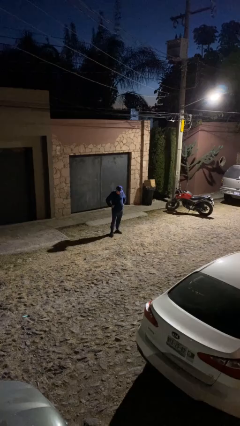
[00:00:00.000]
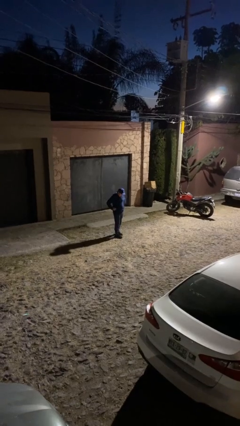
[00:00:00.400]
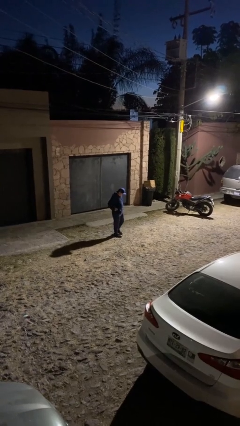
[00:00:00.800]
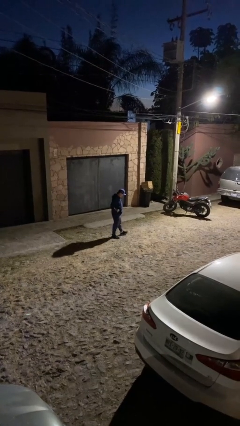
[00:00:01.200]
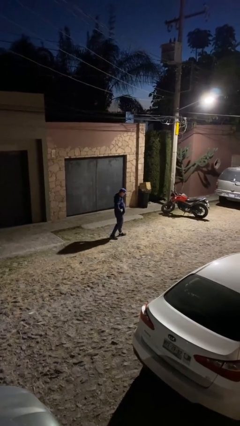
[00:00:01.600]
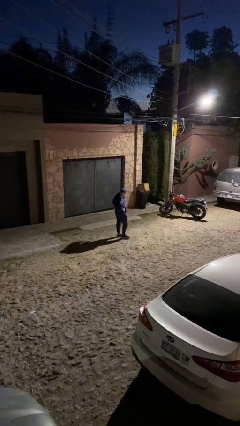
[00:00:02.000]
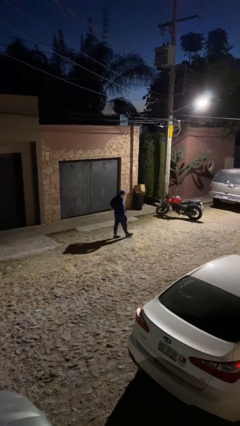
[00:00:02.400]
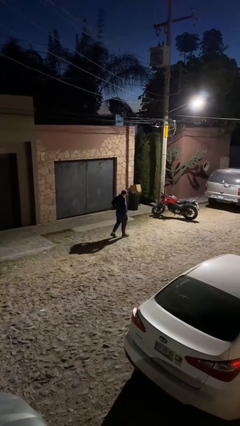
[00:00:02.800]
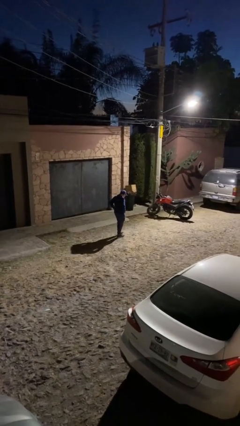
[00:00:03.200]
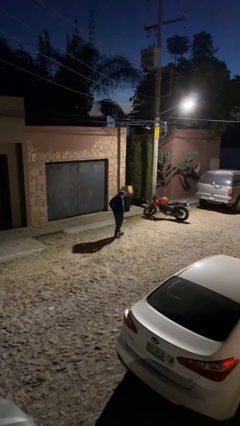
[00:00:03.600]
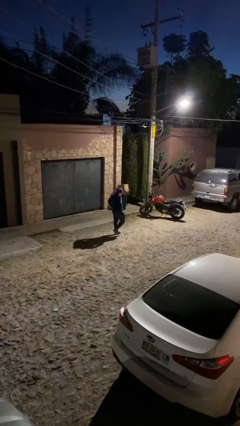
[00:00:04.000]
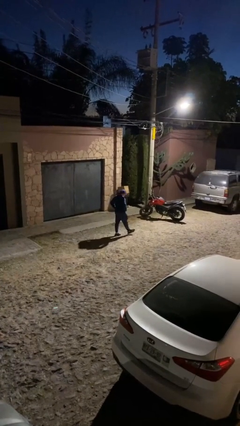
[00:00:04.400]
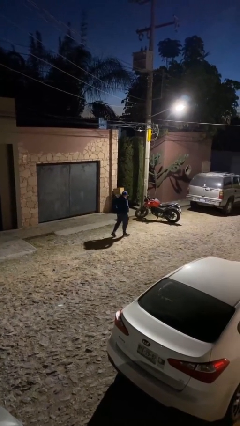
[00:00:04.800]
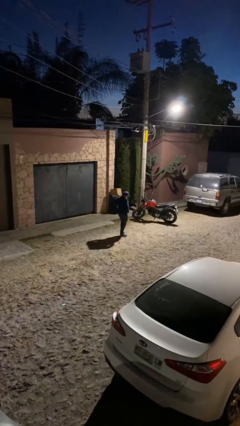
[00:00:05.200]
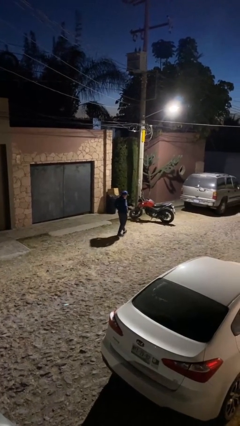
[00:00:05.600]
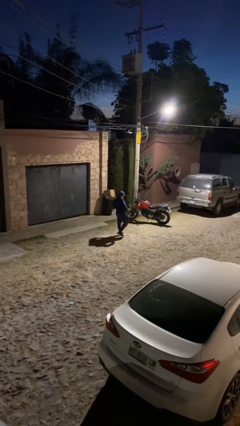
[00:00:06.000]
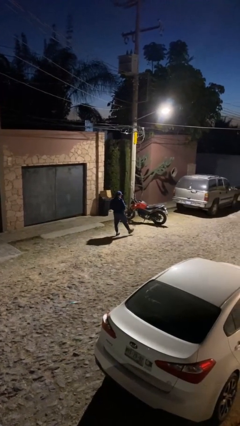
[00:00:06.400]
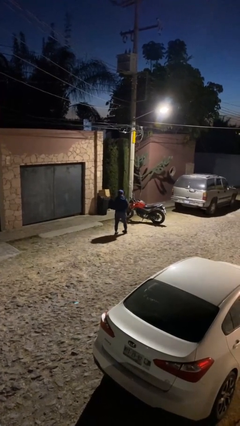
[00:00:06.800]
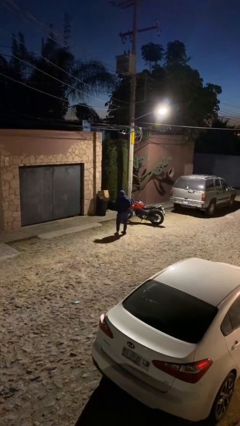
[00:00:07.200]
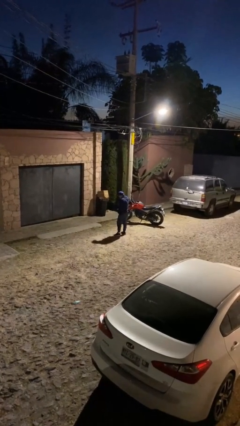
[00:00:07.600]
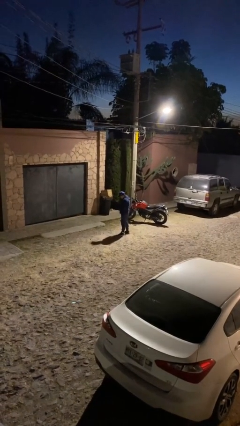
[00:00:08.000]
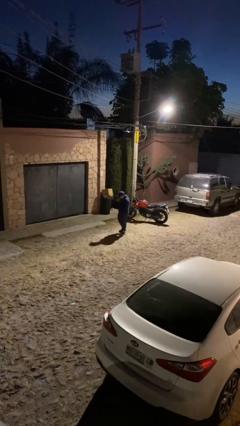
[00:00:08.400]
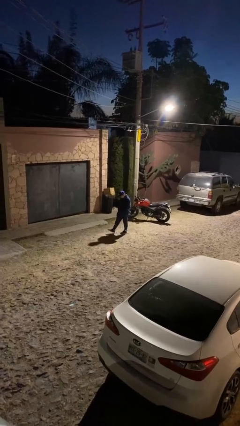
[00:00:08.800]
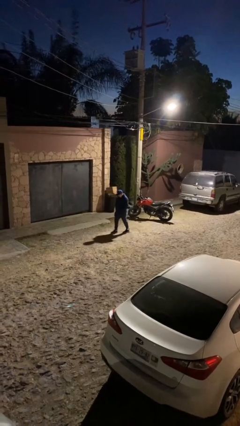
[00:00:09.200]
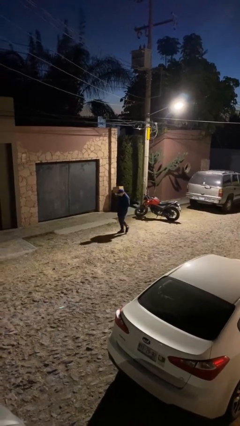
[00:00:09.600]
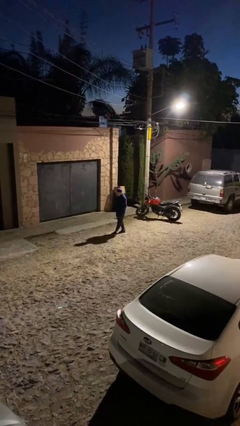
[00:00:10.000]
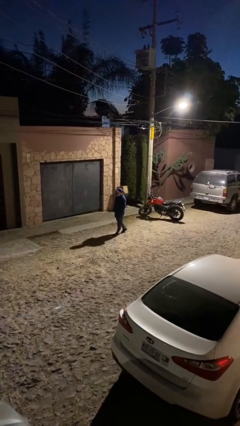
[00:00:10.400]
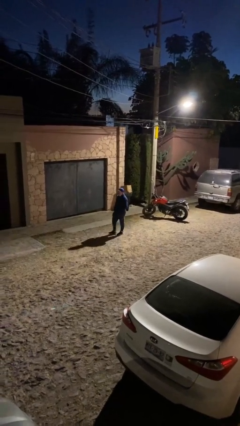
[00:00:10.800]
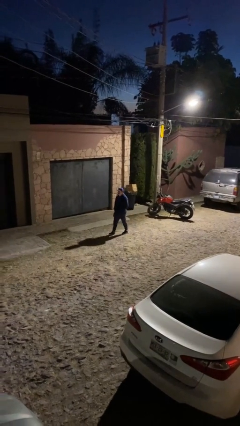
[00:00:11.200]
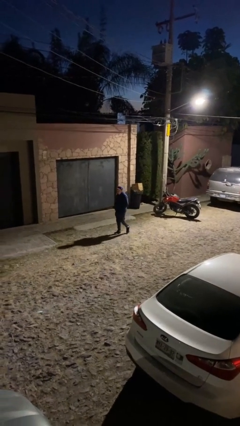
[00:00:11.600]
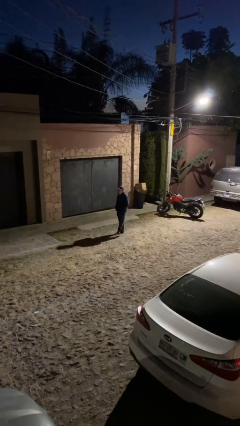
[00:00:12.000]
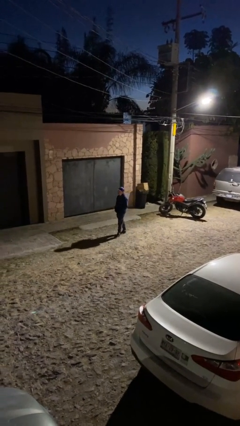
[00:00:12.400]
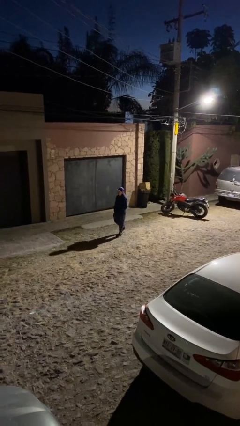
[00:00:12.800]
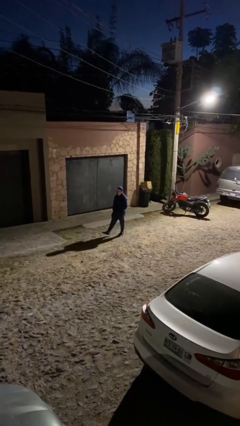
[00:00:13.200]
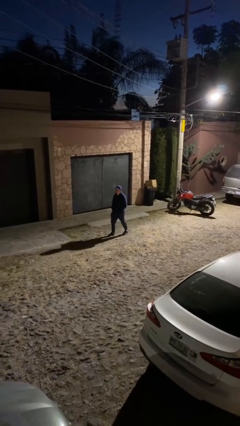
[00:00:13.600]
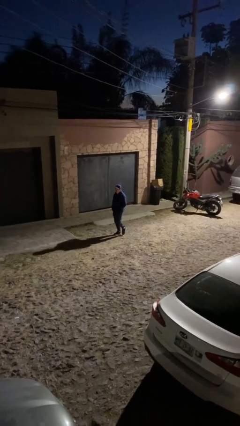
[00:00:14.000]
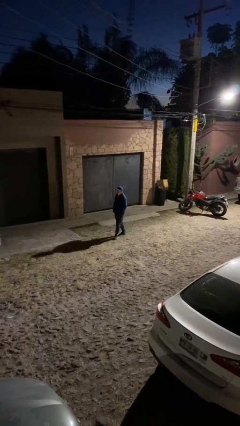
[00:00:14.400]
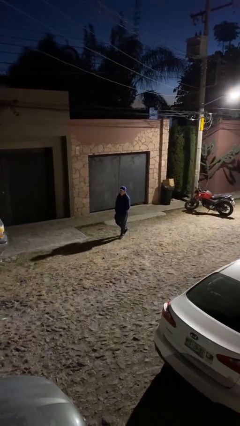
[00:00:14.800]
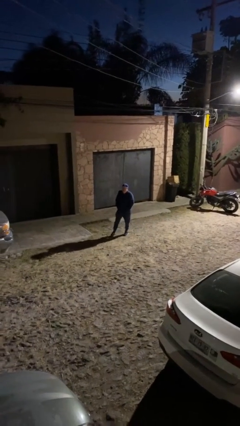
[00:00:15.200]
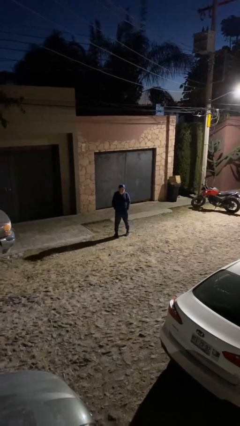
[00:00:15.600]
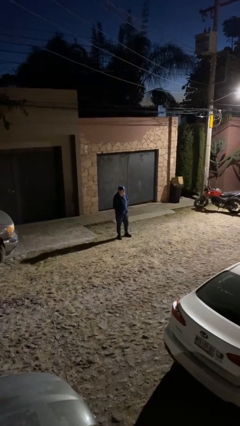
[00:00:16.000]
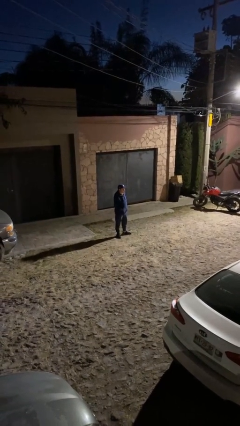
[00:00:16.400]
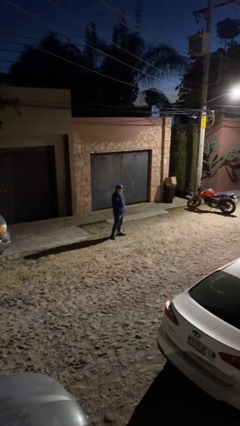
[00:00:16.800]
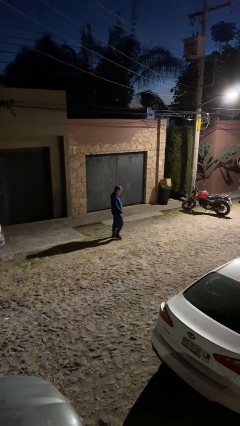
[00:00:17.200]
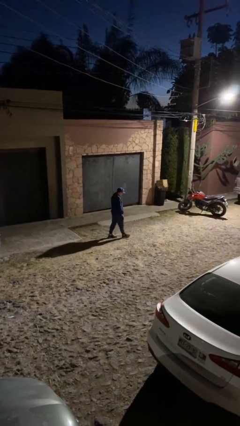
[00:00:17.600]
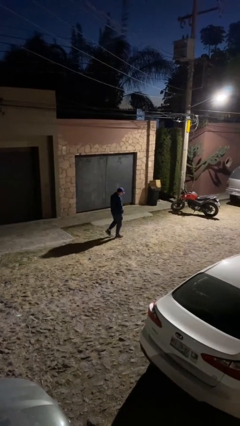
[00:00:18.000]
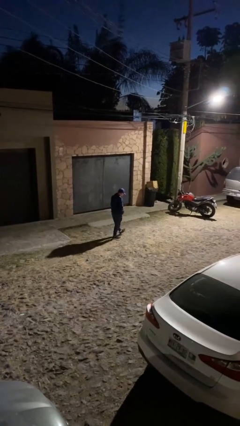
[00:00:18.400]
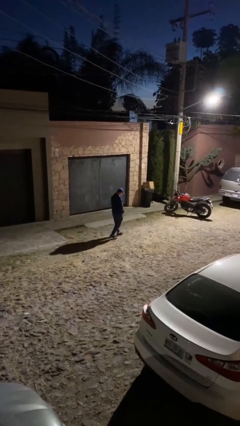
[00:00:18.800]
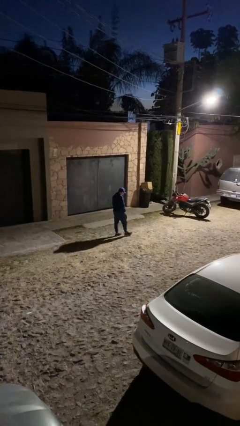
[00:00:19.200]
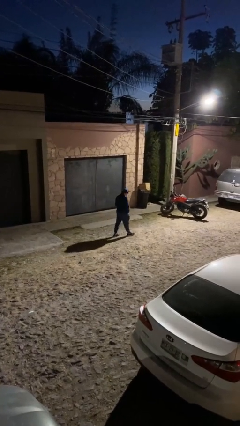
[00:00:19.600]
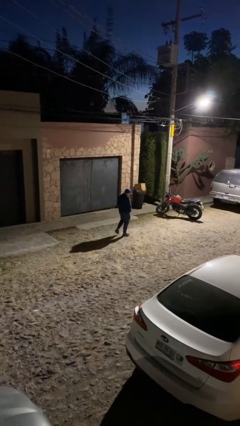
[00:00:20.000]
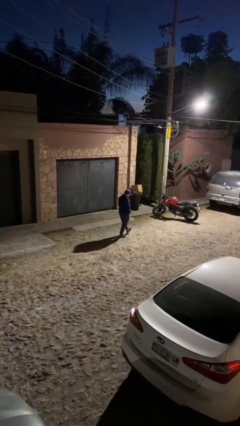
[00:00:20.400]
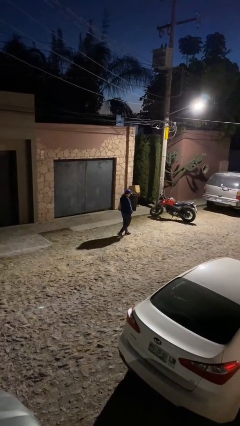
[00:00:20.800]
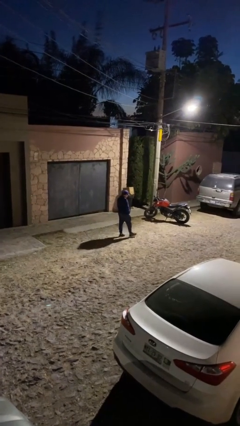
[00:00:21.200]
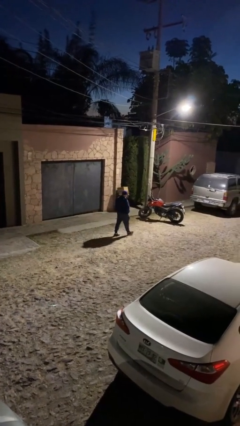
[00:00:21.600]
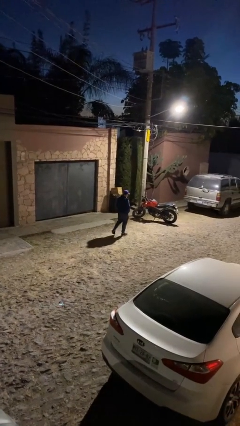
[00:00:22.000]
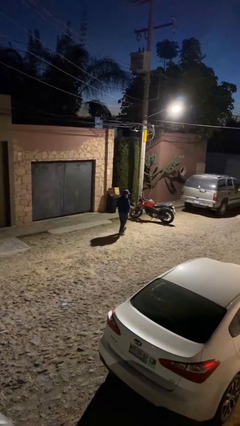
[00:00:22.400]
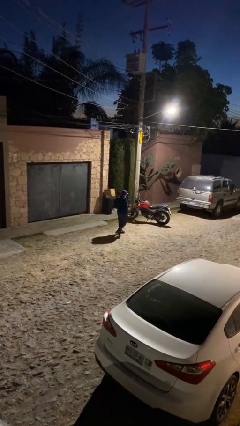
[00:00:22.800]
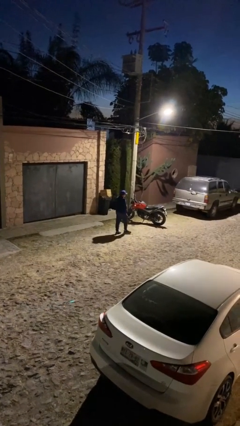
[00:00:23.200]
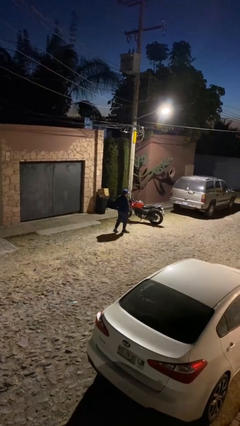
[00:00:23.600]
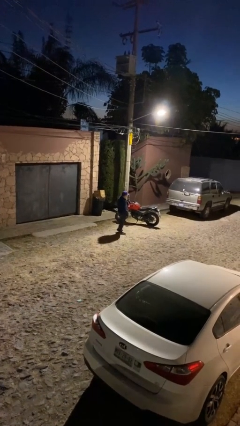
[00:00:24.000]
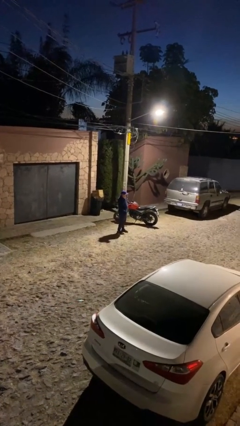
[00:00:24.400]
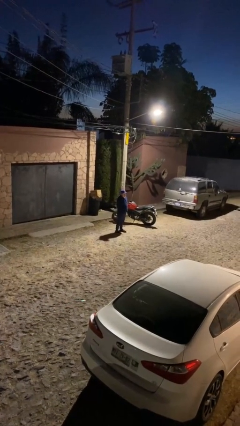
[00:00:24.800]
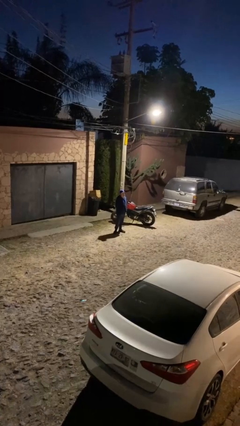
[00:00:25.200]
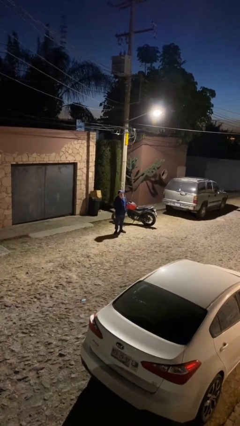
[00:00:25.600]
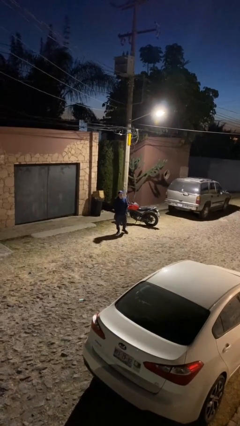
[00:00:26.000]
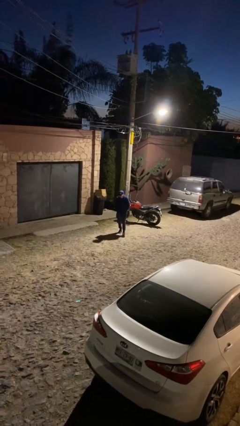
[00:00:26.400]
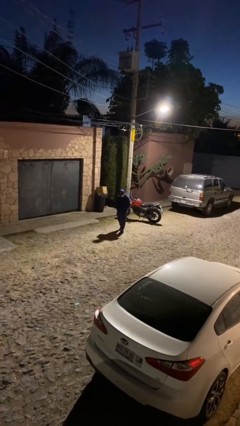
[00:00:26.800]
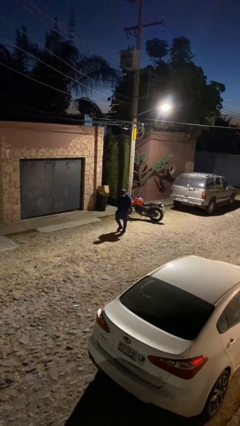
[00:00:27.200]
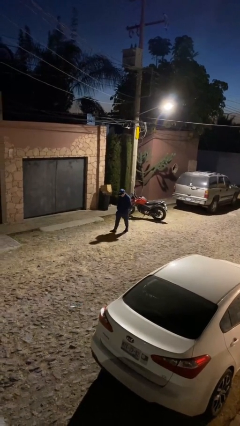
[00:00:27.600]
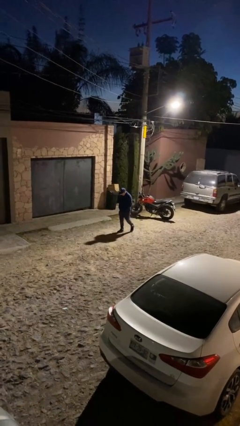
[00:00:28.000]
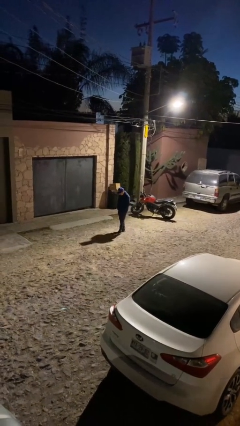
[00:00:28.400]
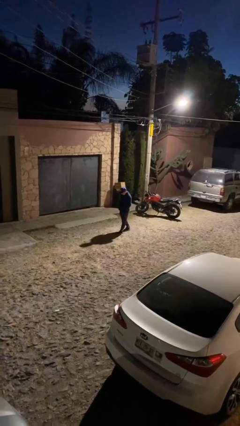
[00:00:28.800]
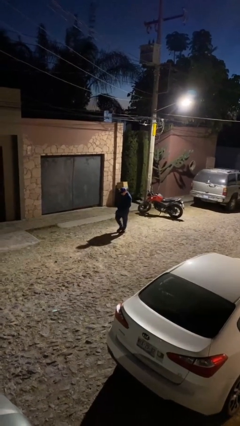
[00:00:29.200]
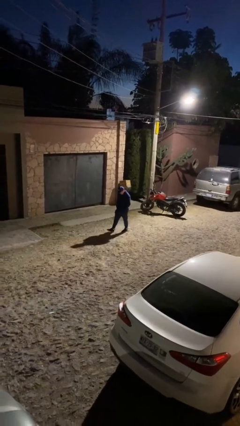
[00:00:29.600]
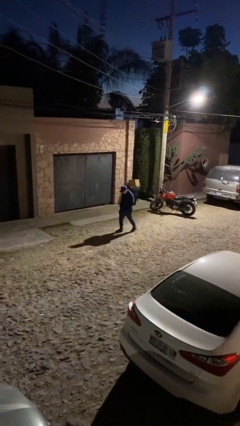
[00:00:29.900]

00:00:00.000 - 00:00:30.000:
person walks

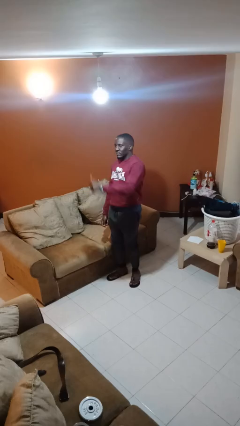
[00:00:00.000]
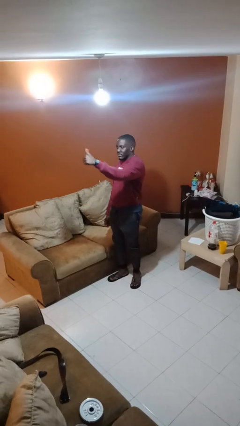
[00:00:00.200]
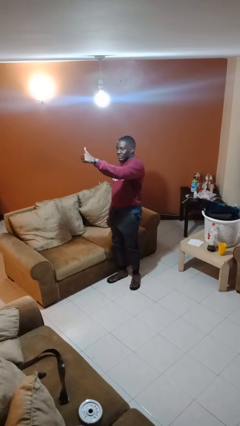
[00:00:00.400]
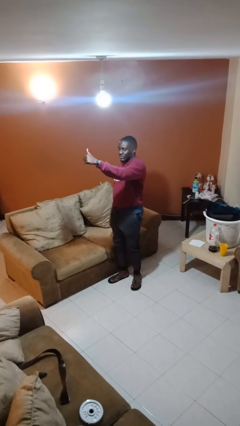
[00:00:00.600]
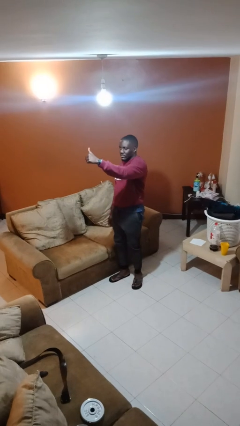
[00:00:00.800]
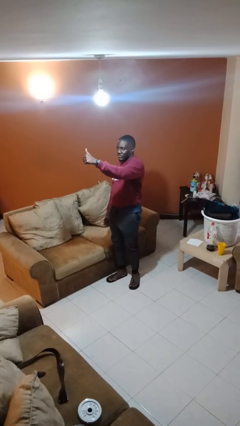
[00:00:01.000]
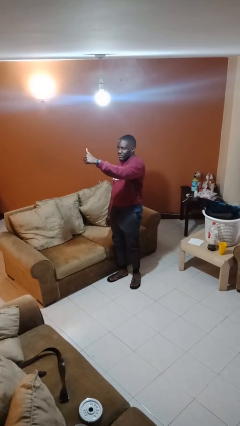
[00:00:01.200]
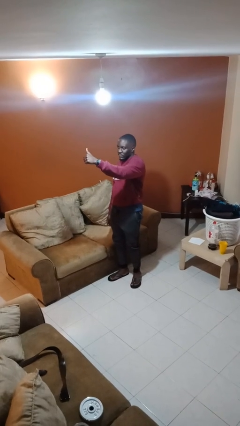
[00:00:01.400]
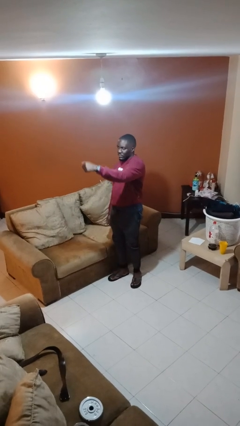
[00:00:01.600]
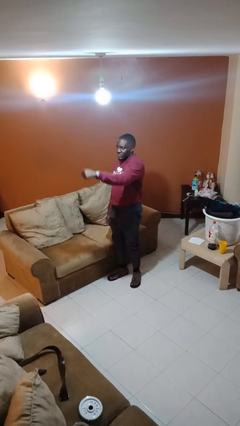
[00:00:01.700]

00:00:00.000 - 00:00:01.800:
person gestures thumbs up

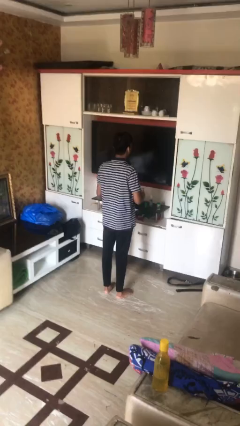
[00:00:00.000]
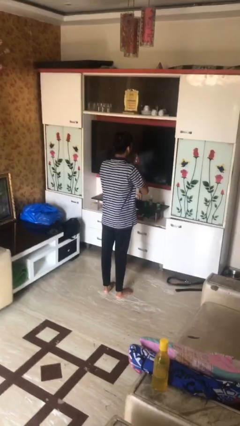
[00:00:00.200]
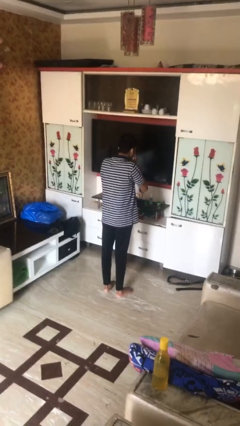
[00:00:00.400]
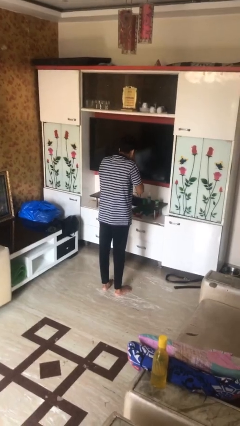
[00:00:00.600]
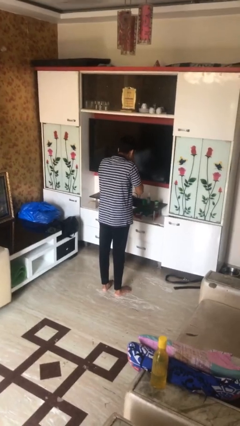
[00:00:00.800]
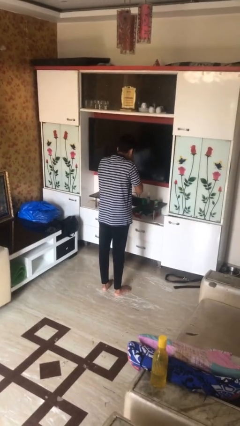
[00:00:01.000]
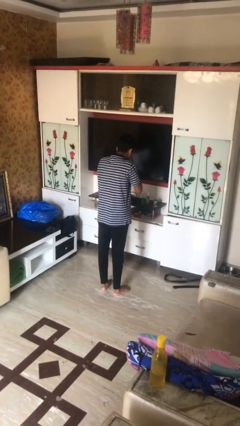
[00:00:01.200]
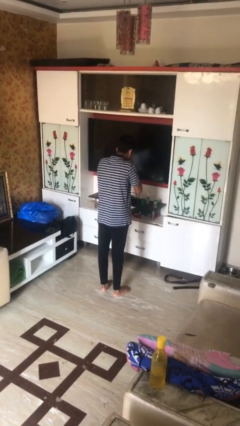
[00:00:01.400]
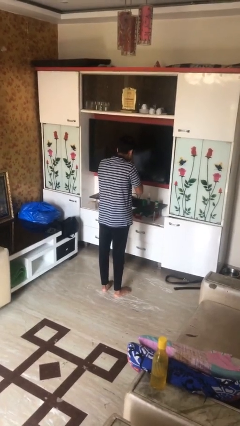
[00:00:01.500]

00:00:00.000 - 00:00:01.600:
person sneezes into hand
